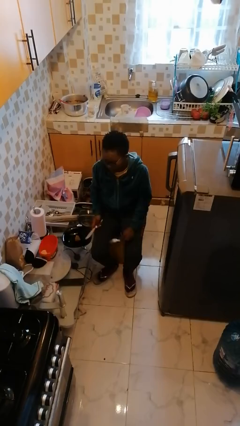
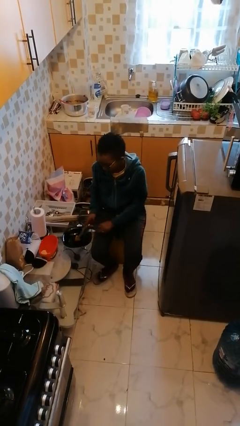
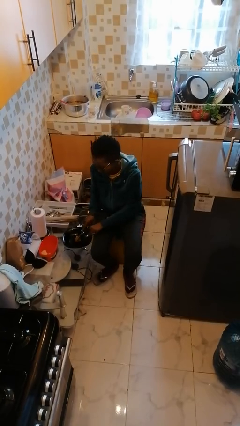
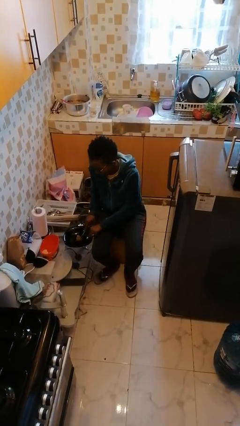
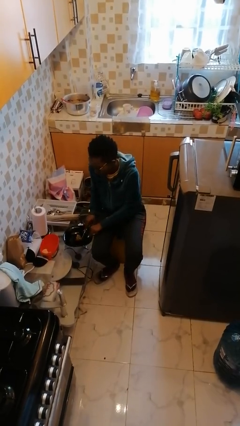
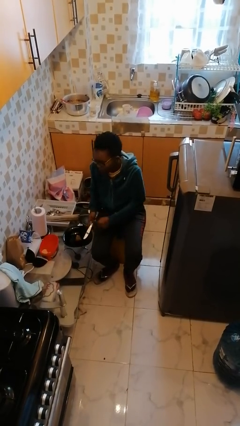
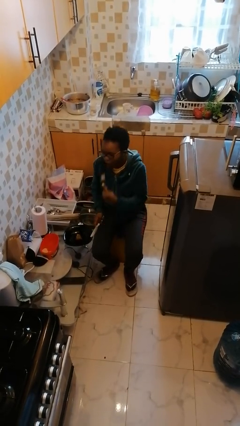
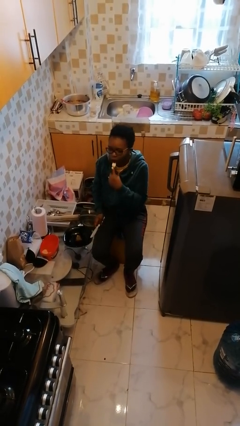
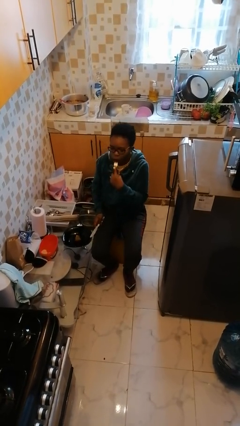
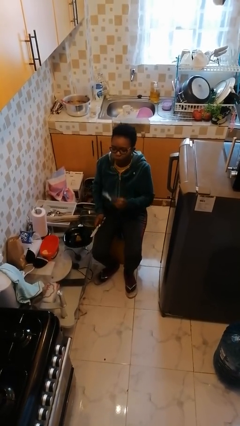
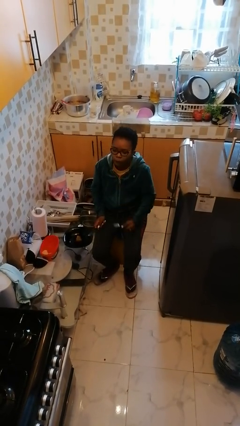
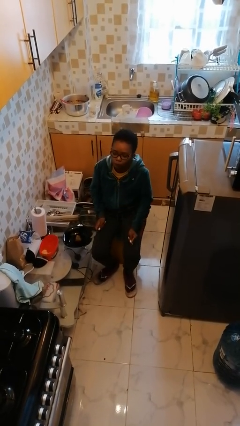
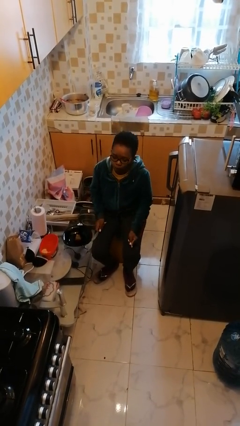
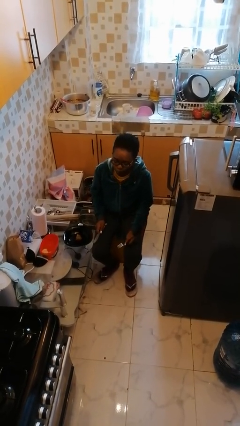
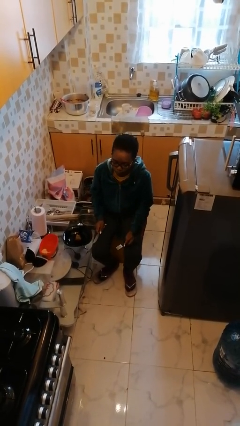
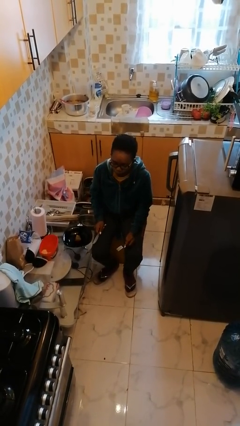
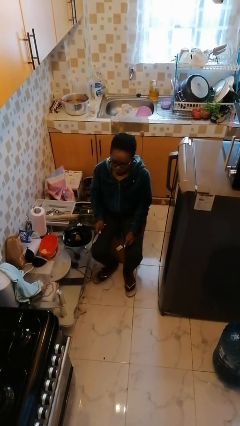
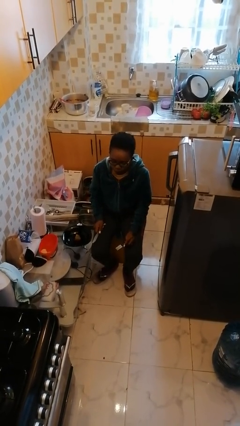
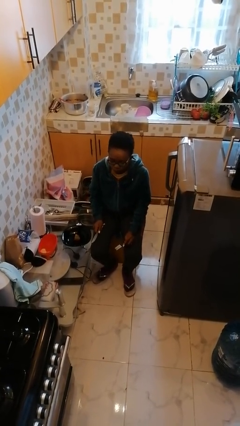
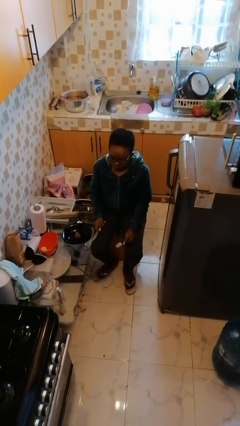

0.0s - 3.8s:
person eats with utensil

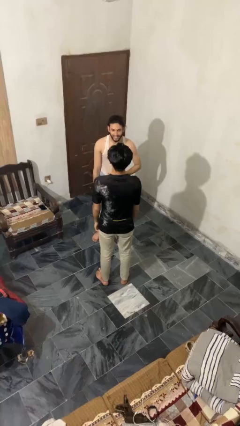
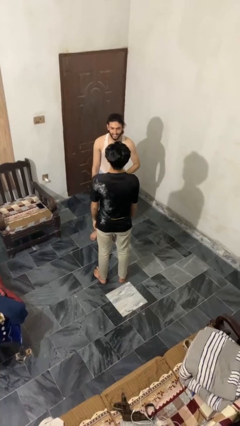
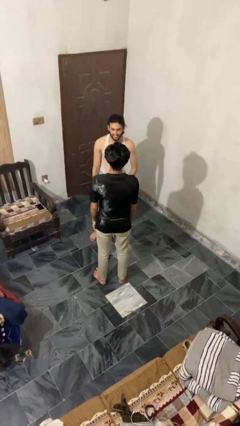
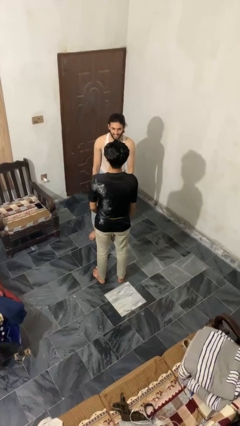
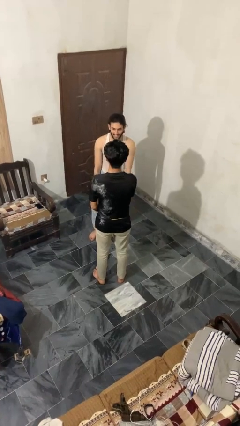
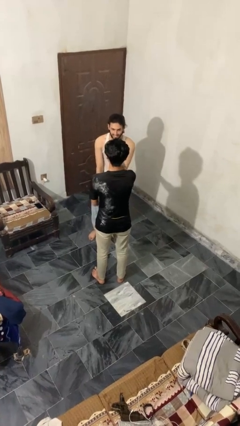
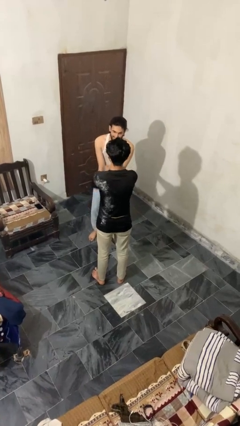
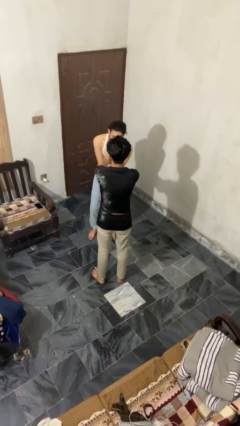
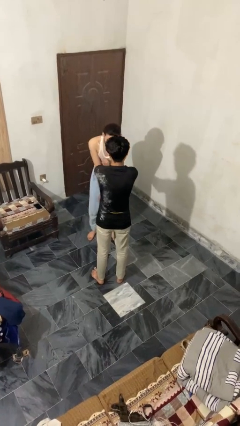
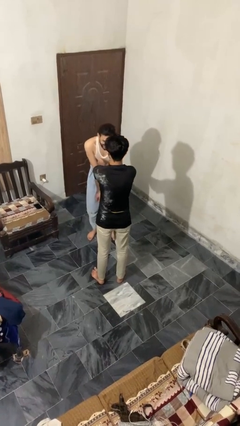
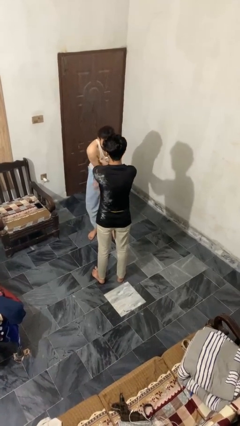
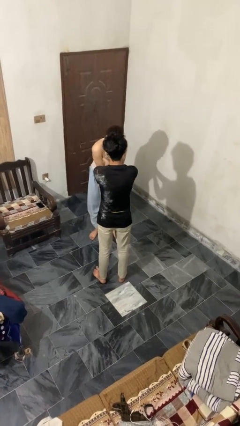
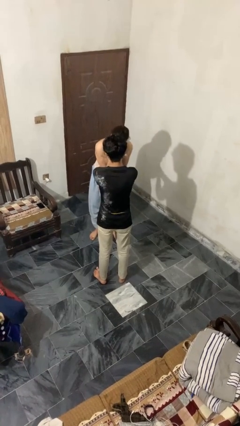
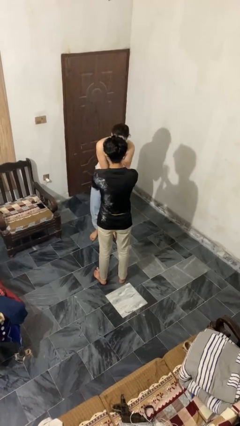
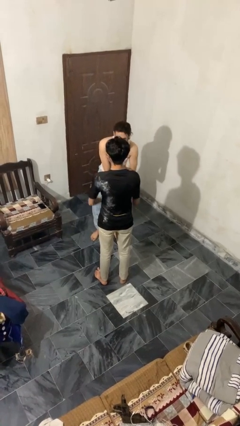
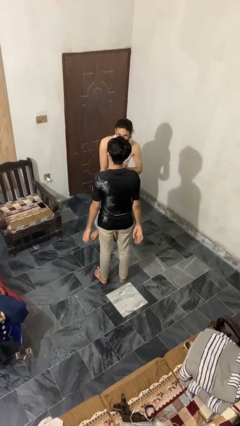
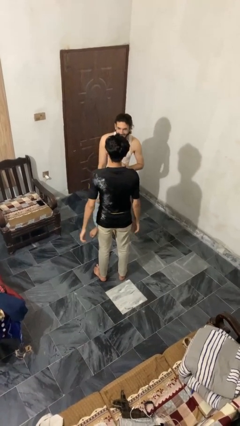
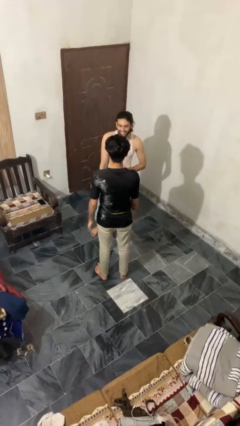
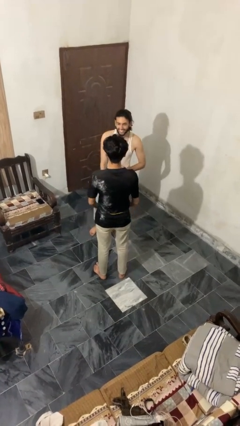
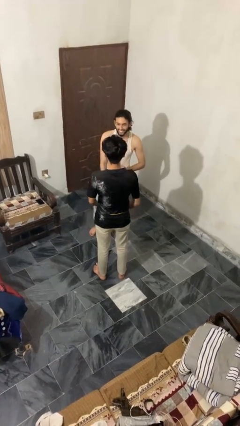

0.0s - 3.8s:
person tickles person

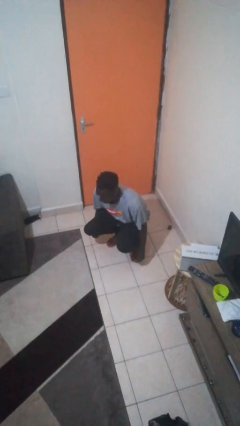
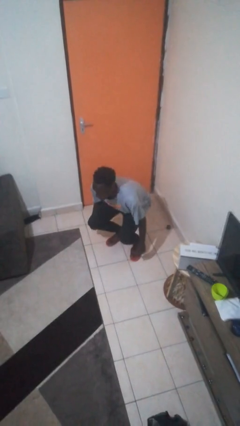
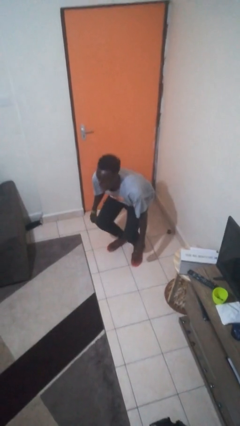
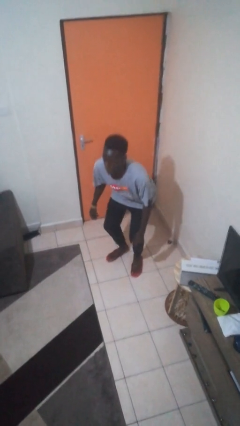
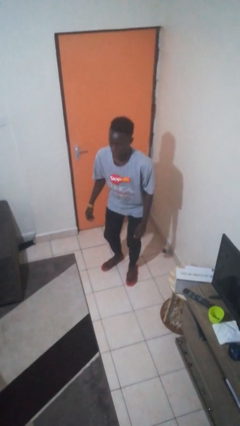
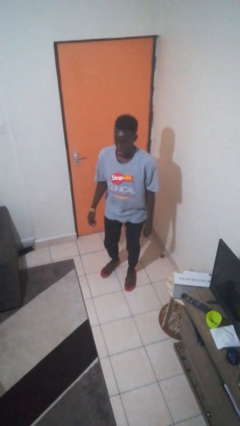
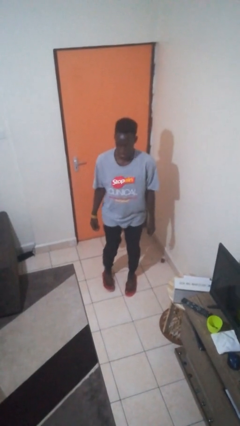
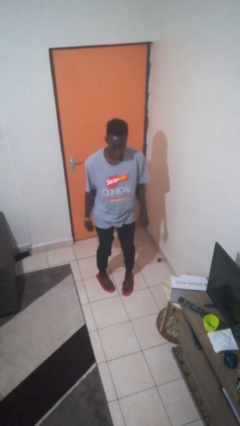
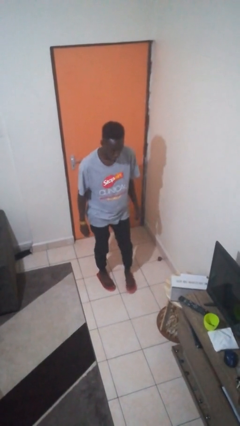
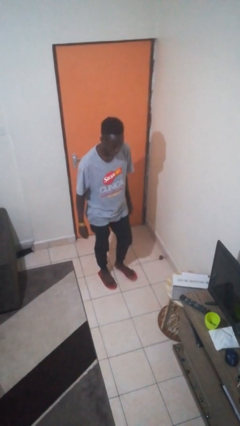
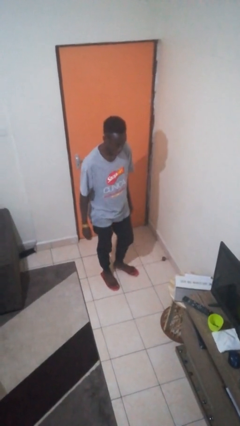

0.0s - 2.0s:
person stands up

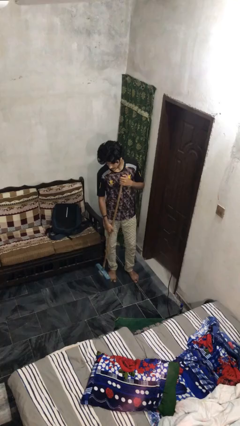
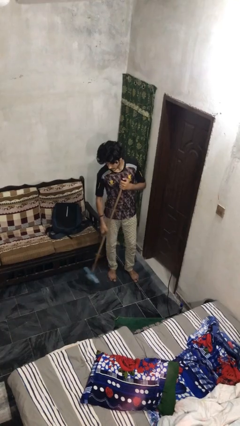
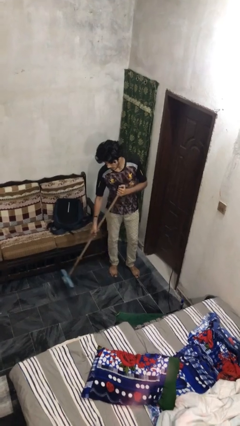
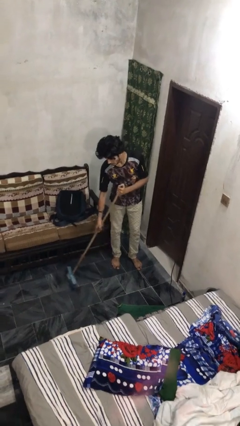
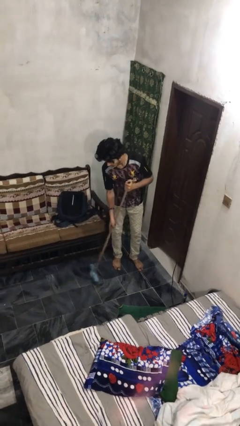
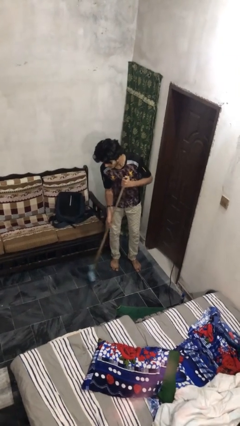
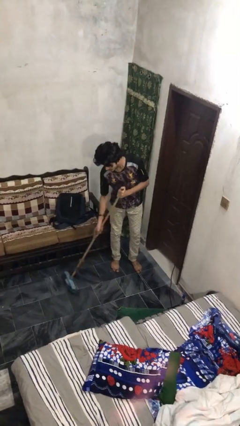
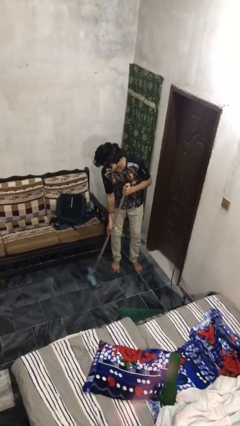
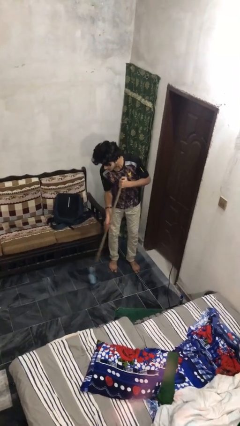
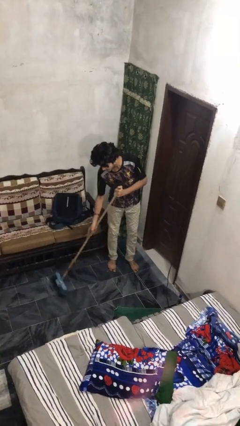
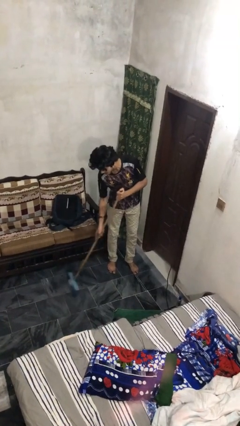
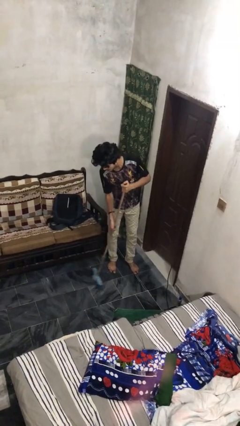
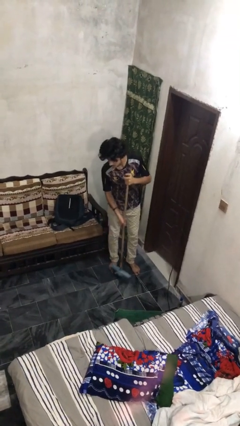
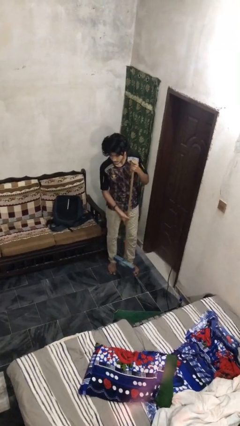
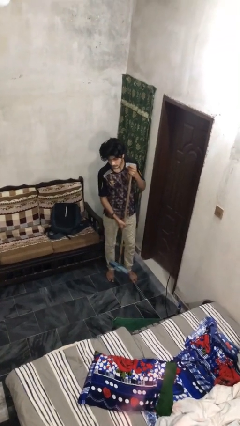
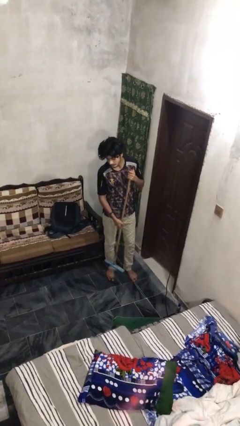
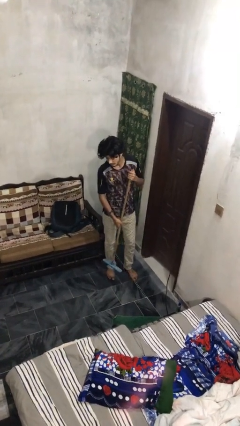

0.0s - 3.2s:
person sweeps floor

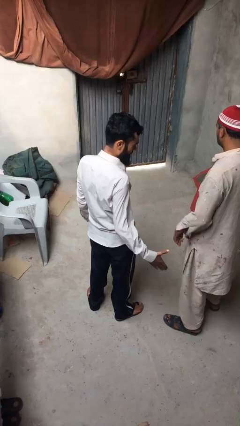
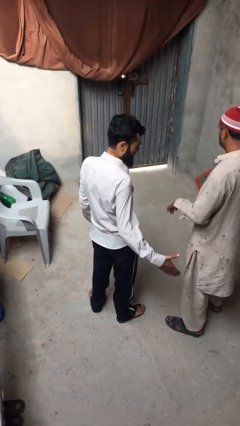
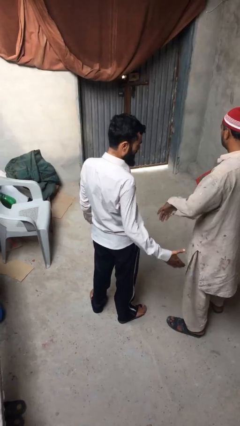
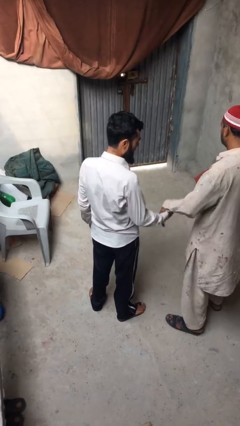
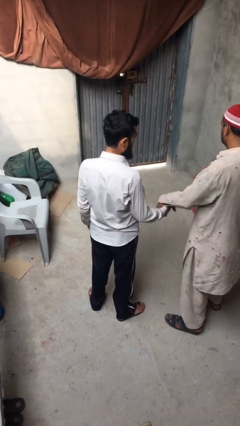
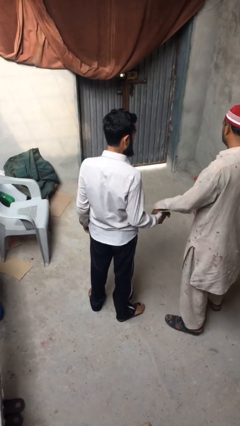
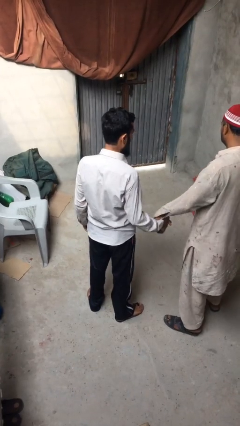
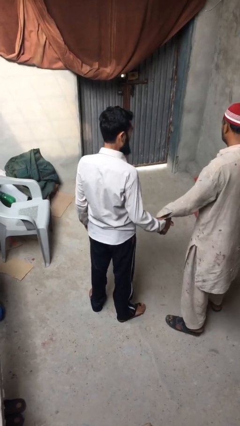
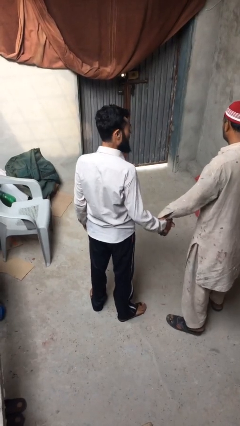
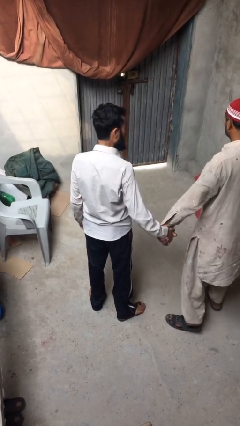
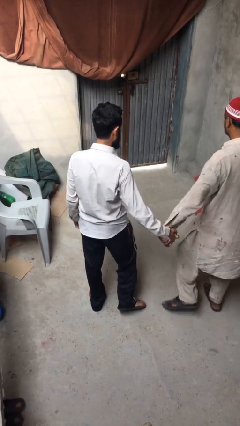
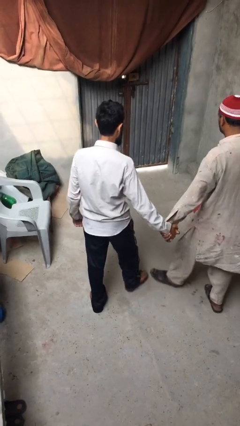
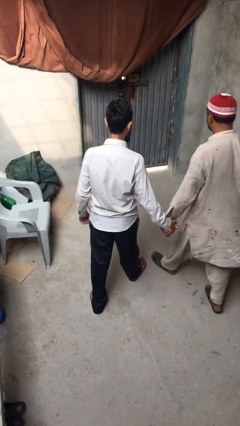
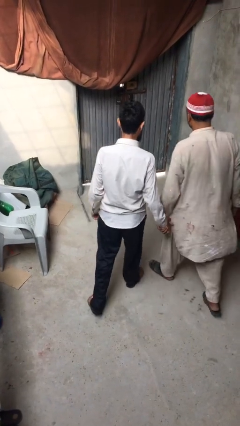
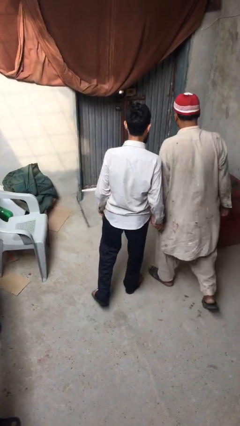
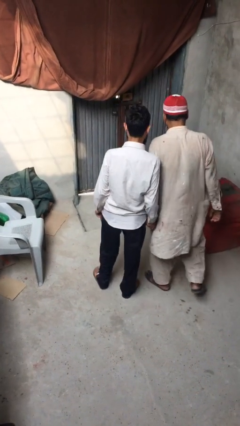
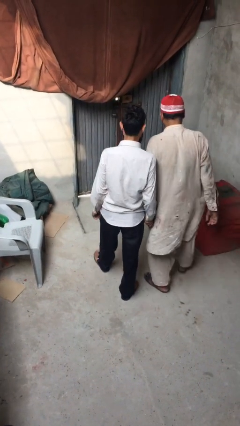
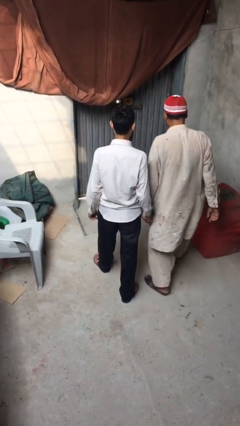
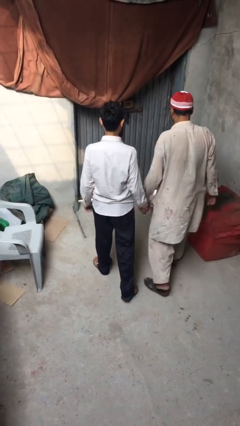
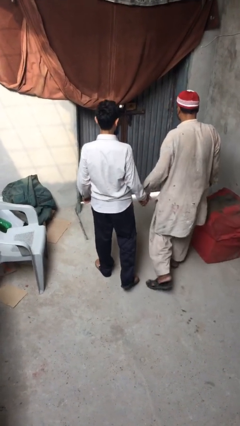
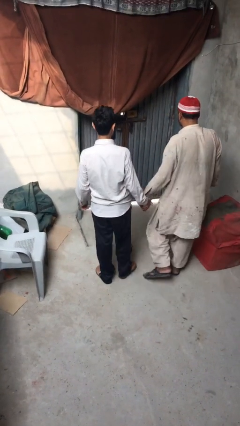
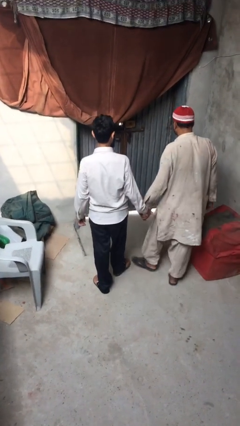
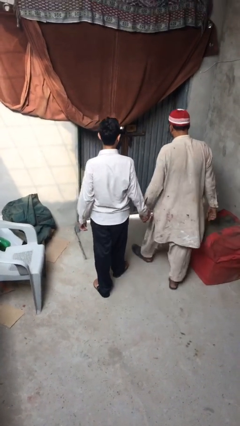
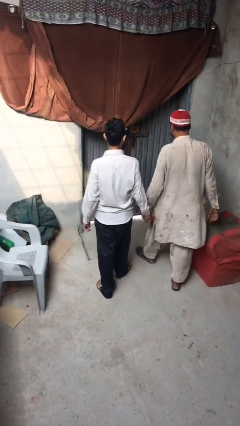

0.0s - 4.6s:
person holds hand
